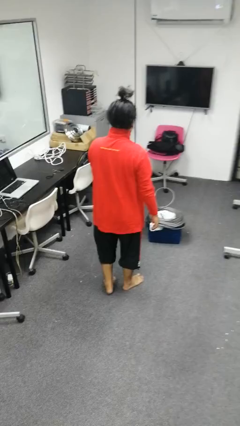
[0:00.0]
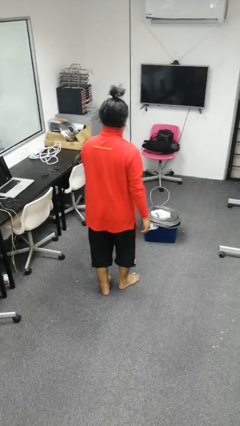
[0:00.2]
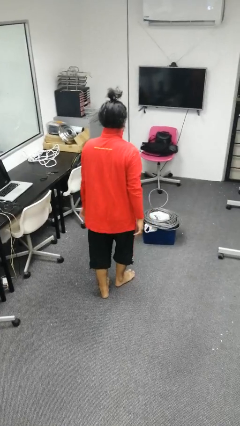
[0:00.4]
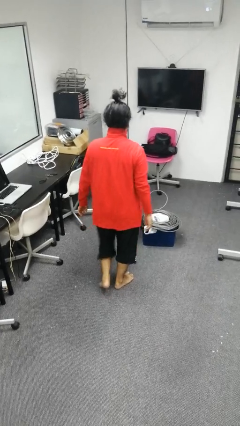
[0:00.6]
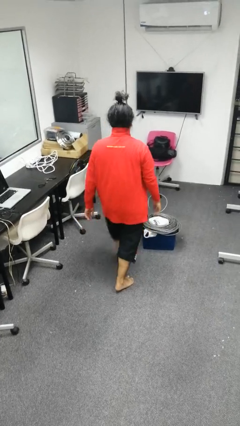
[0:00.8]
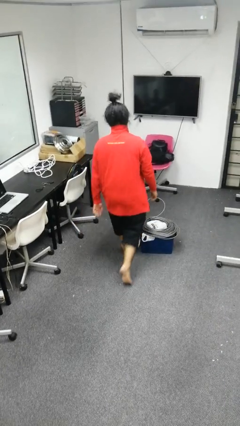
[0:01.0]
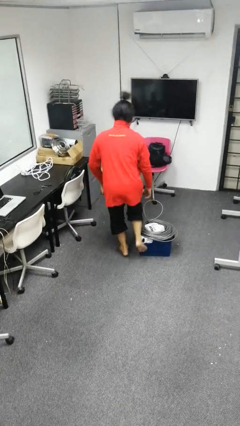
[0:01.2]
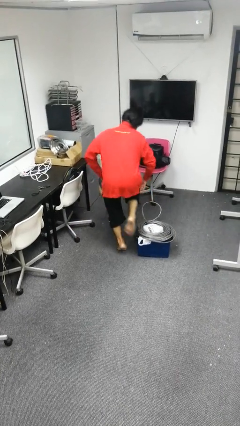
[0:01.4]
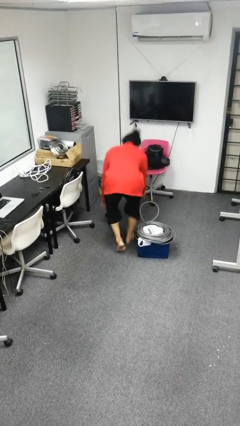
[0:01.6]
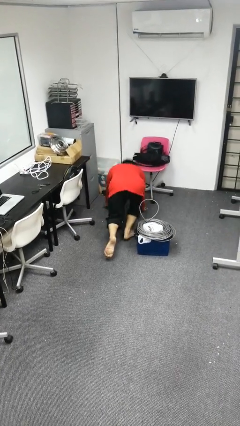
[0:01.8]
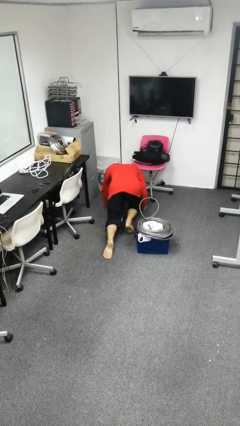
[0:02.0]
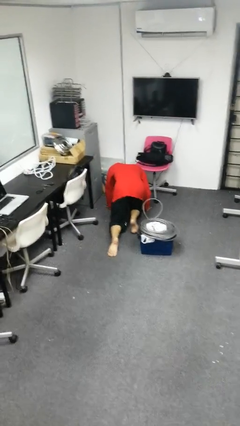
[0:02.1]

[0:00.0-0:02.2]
person trips on object on floor

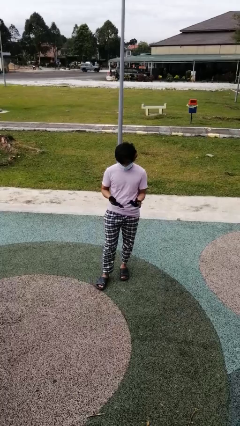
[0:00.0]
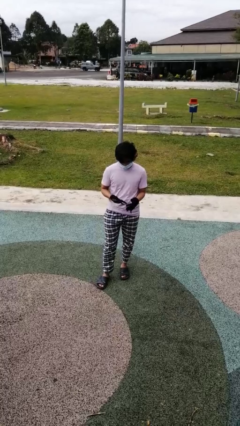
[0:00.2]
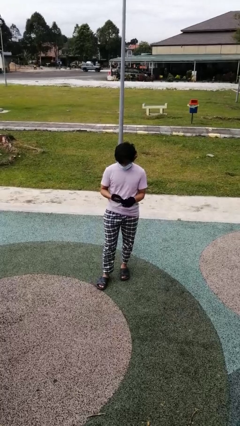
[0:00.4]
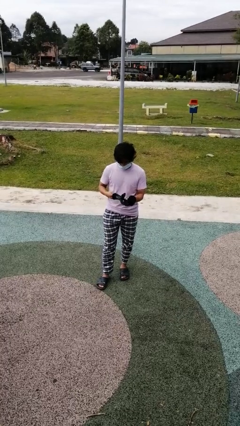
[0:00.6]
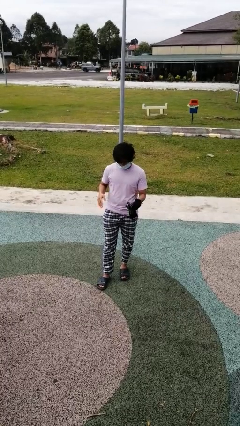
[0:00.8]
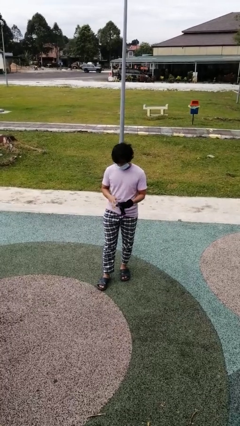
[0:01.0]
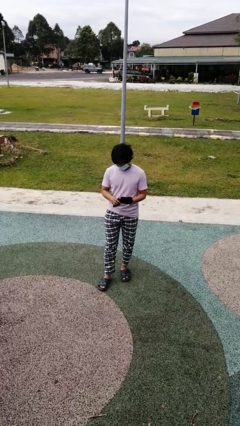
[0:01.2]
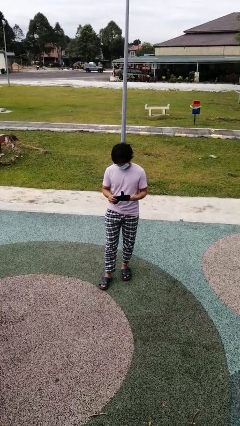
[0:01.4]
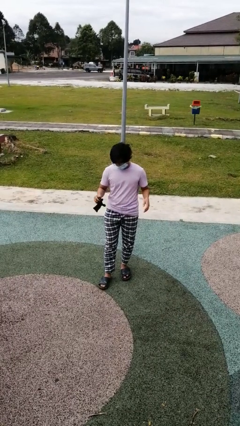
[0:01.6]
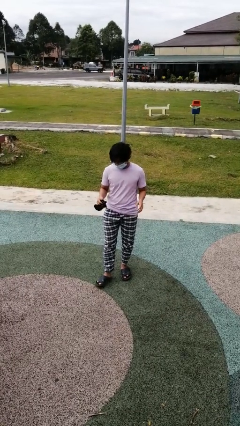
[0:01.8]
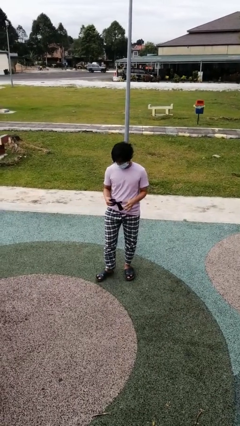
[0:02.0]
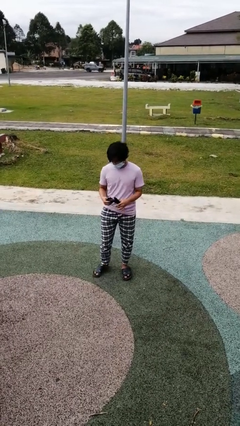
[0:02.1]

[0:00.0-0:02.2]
person takes off gloves

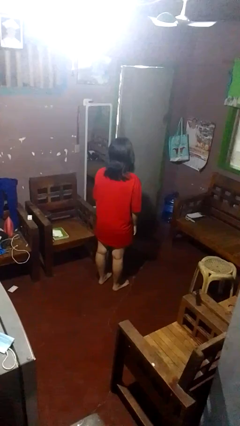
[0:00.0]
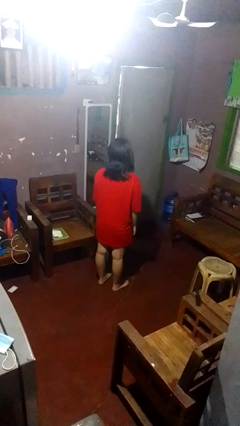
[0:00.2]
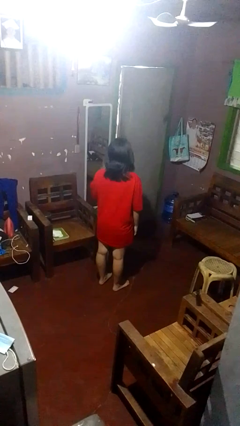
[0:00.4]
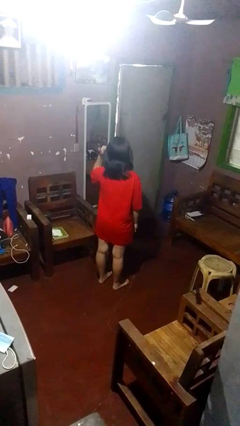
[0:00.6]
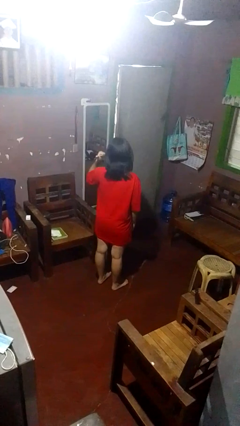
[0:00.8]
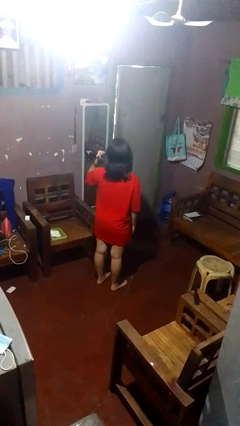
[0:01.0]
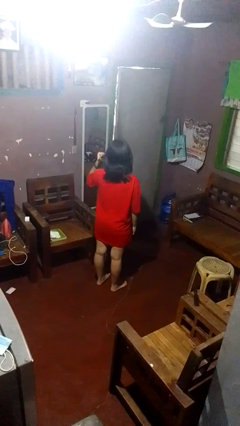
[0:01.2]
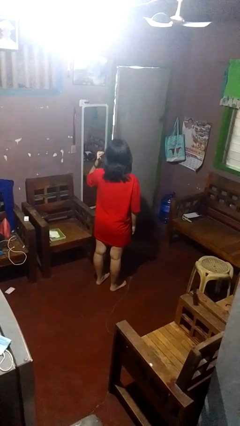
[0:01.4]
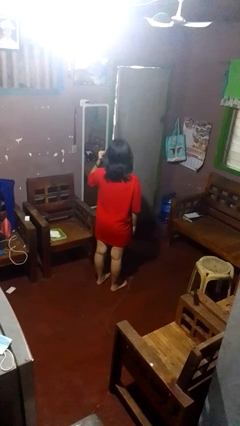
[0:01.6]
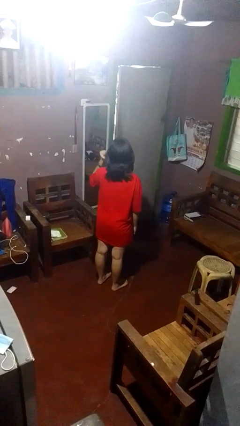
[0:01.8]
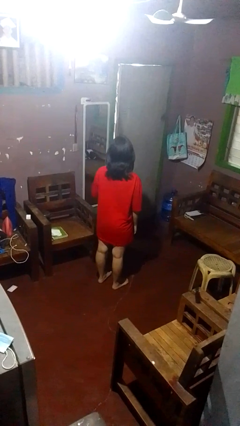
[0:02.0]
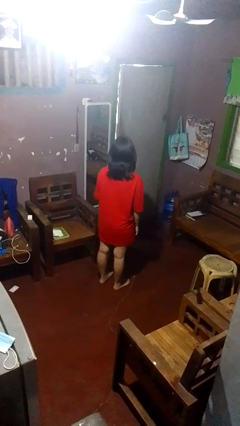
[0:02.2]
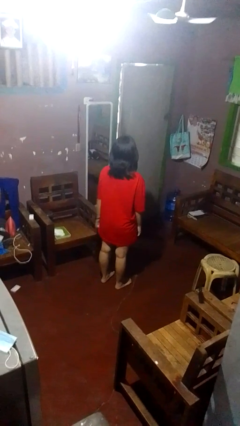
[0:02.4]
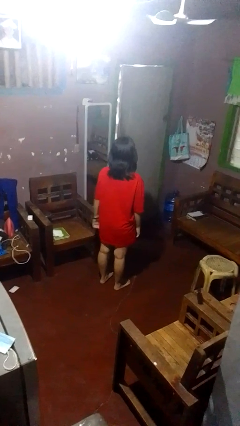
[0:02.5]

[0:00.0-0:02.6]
person gestures behind me

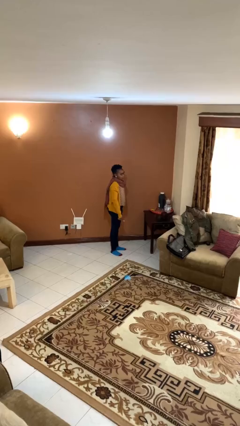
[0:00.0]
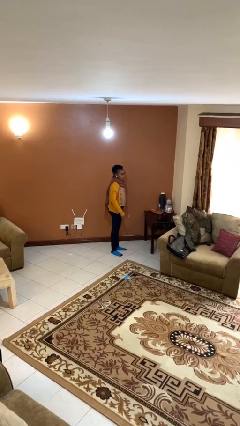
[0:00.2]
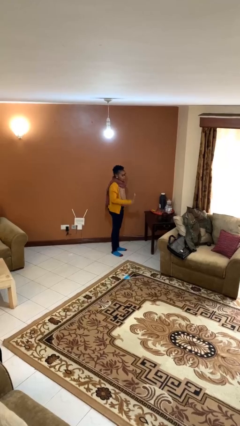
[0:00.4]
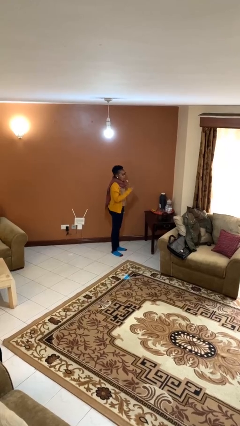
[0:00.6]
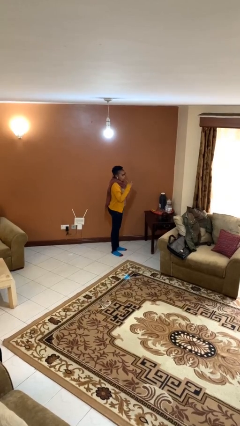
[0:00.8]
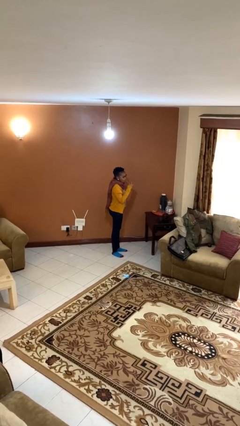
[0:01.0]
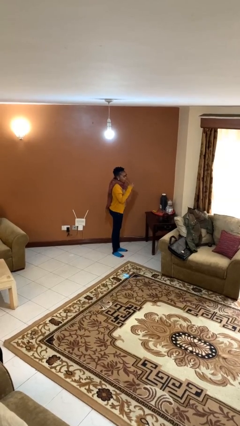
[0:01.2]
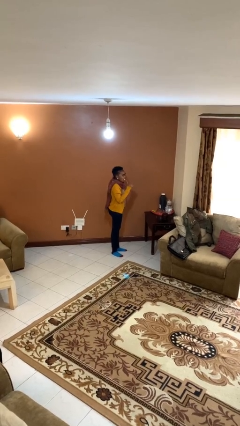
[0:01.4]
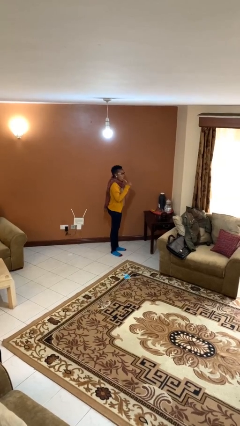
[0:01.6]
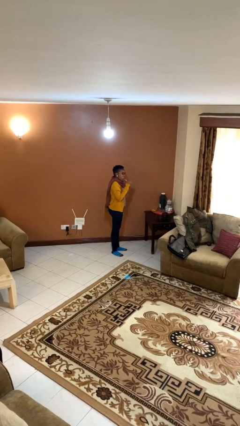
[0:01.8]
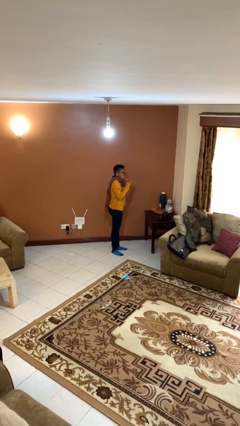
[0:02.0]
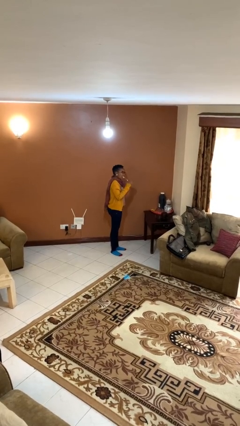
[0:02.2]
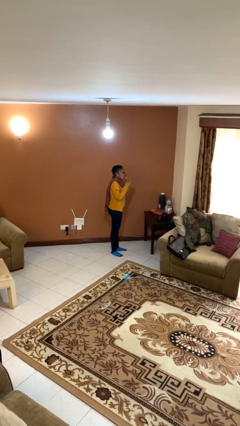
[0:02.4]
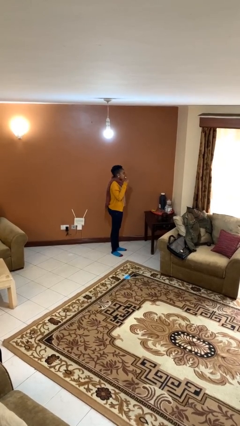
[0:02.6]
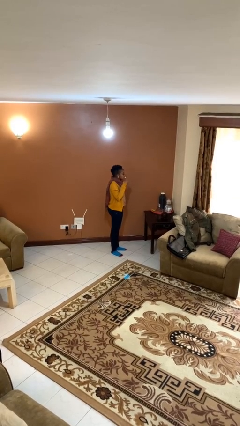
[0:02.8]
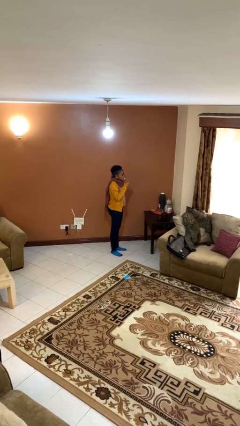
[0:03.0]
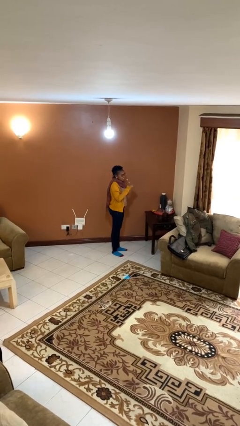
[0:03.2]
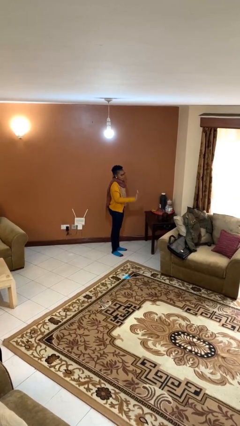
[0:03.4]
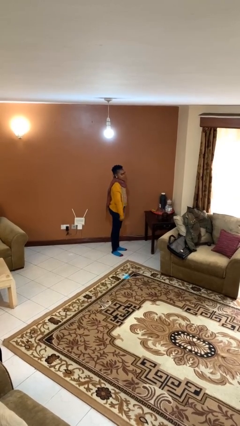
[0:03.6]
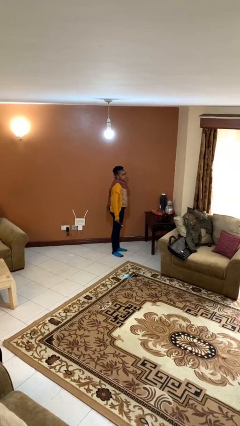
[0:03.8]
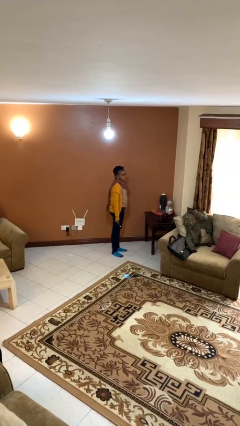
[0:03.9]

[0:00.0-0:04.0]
person brushes teeth

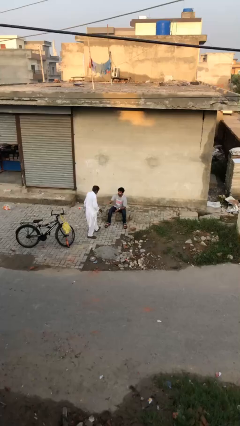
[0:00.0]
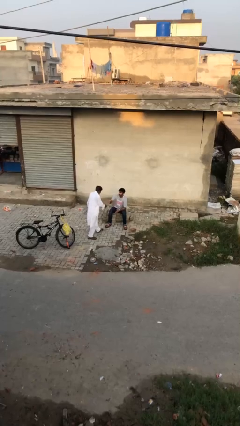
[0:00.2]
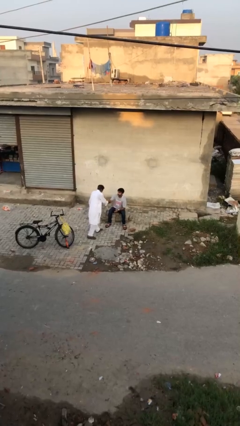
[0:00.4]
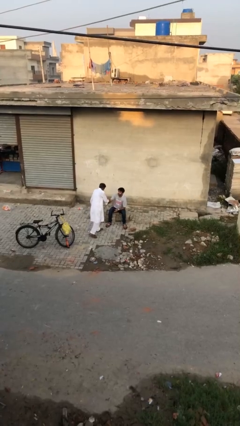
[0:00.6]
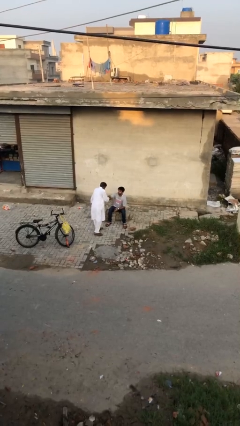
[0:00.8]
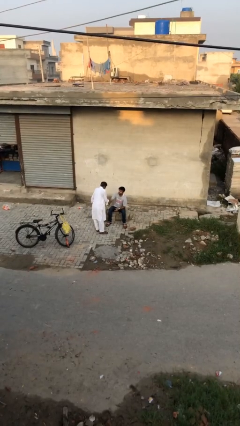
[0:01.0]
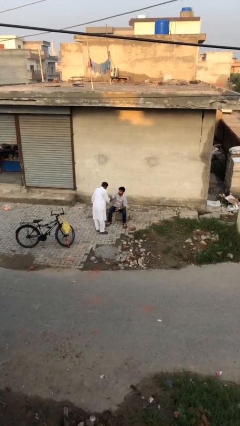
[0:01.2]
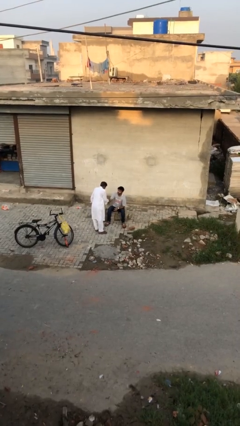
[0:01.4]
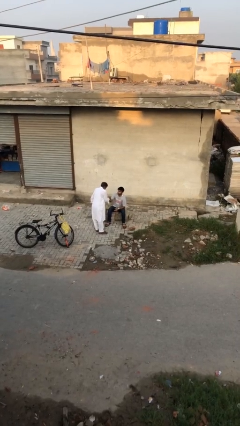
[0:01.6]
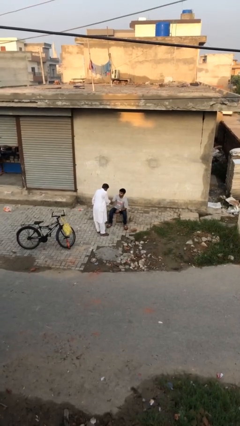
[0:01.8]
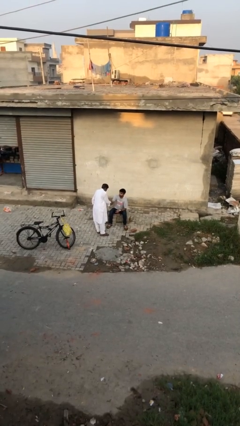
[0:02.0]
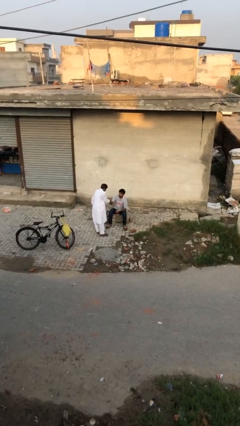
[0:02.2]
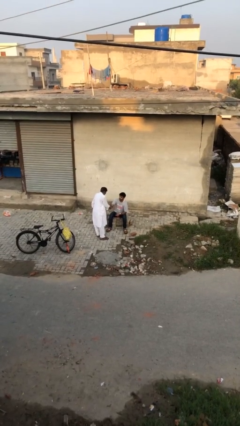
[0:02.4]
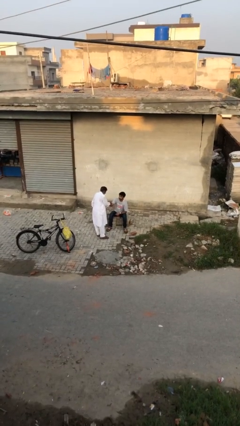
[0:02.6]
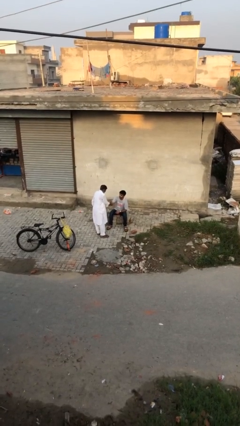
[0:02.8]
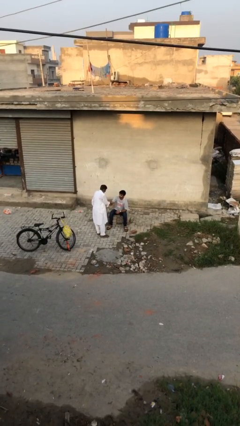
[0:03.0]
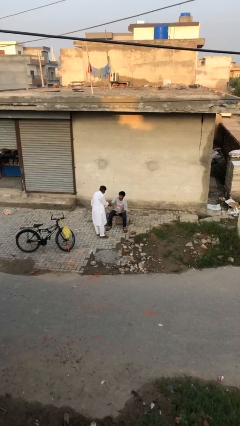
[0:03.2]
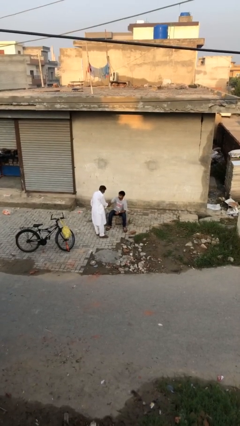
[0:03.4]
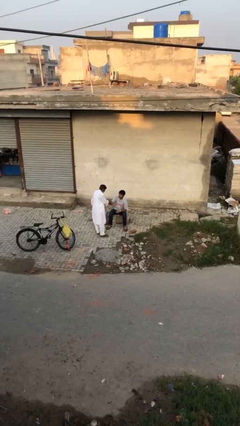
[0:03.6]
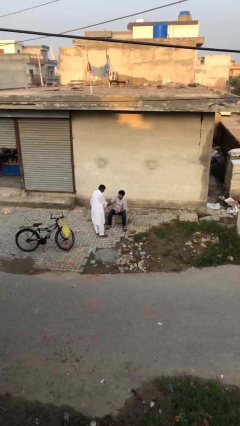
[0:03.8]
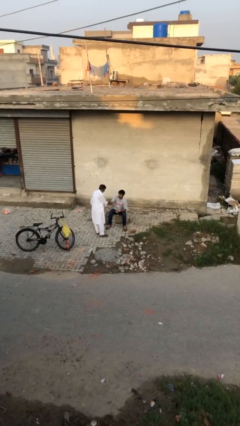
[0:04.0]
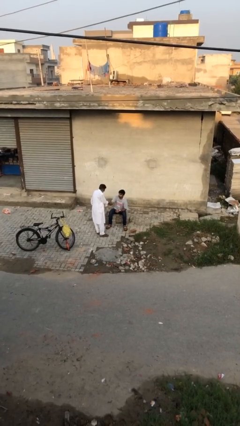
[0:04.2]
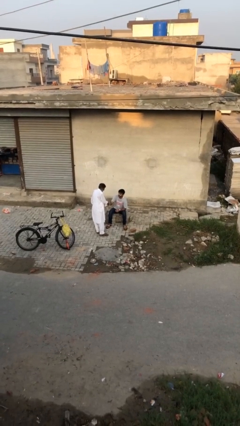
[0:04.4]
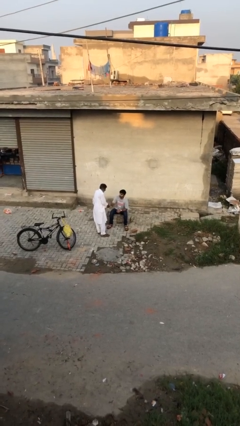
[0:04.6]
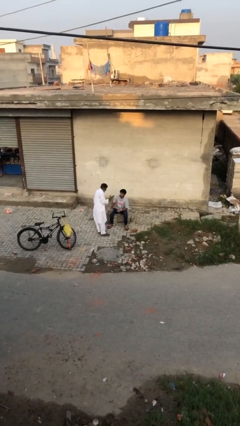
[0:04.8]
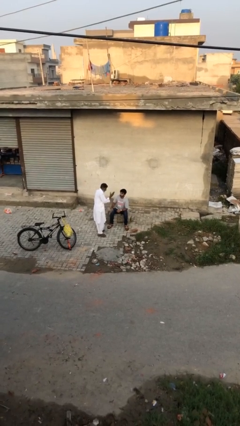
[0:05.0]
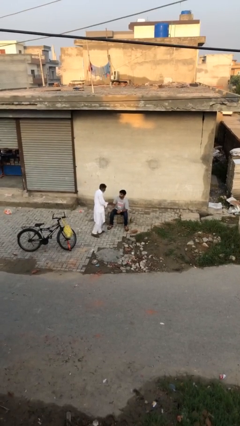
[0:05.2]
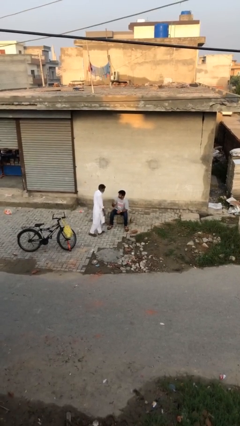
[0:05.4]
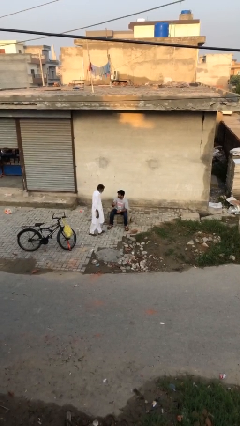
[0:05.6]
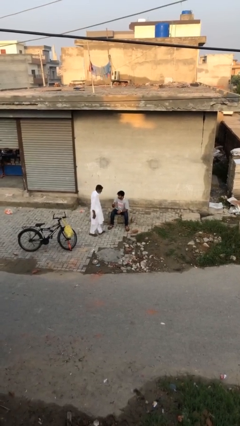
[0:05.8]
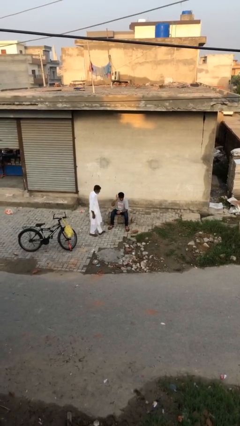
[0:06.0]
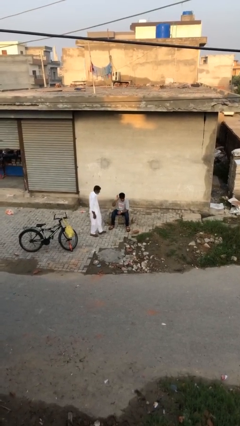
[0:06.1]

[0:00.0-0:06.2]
person shakes hand

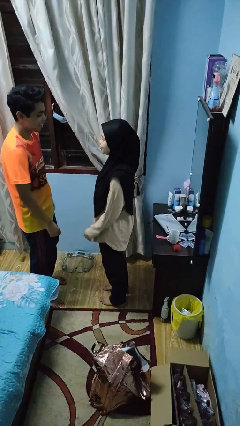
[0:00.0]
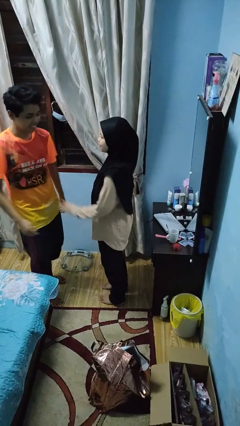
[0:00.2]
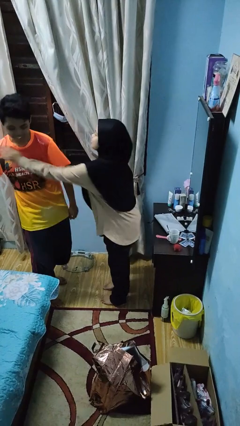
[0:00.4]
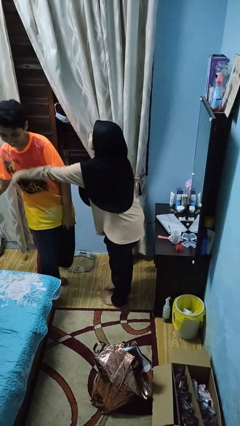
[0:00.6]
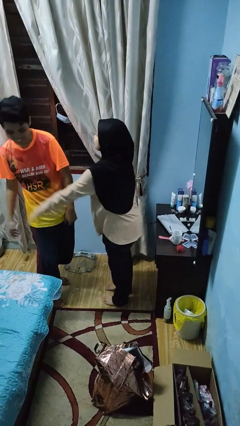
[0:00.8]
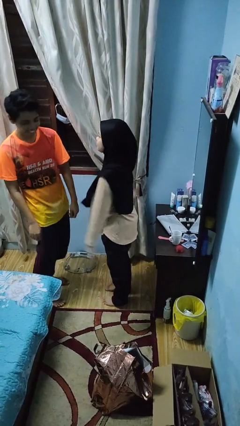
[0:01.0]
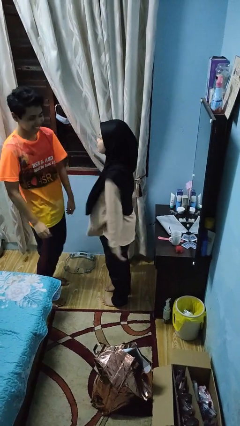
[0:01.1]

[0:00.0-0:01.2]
person shoves person
